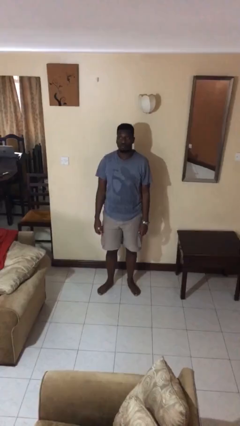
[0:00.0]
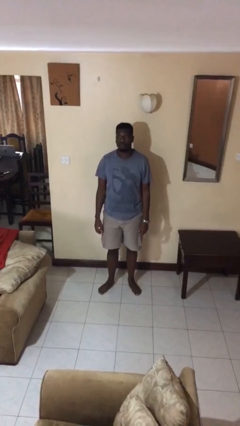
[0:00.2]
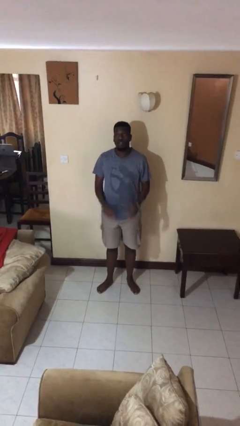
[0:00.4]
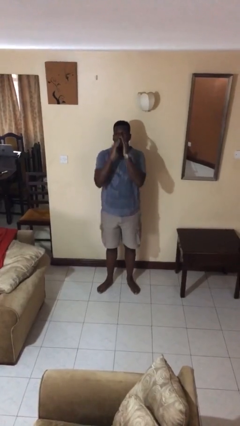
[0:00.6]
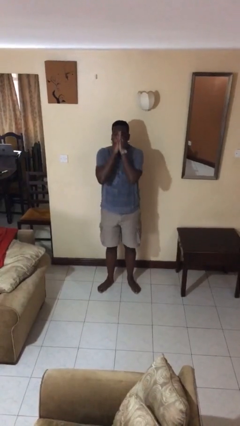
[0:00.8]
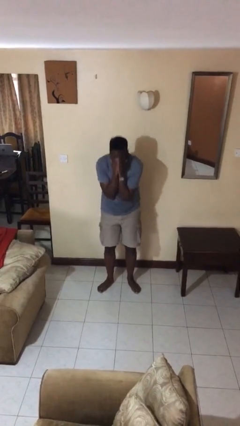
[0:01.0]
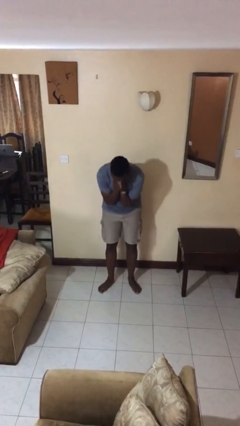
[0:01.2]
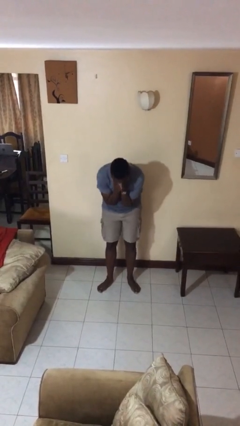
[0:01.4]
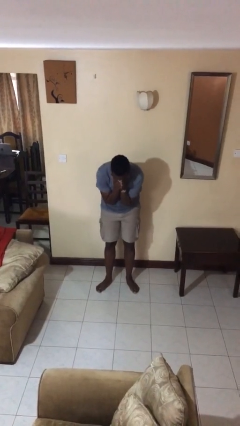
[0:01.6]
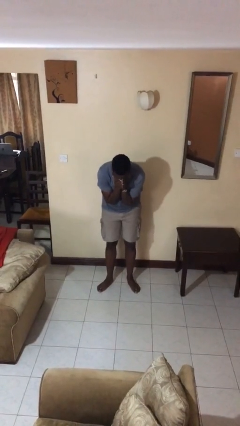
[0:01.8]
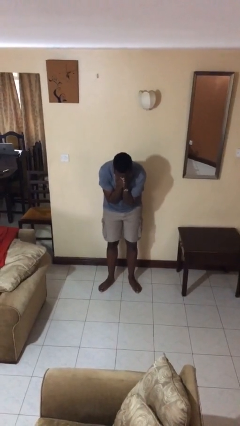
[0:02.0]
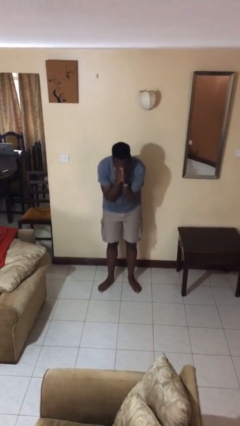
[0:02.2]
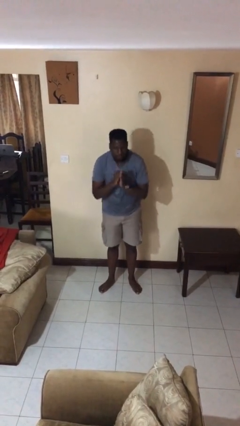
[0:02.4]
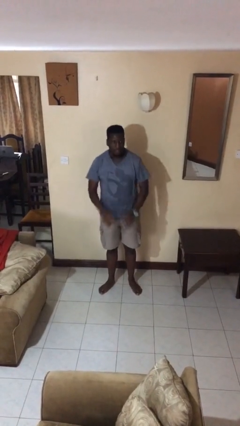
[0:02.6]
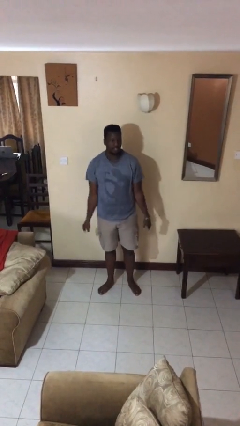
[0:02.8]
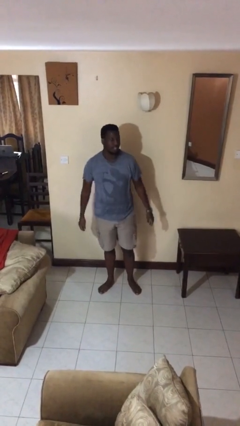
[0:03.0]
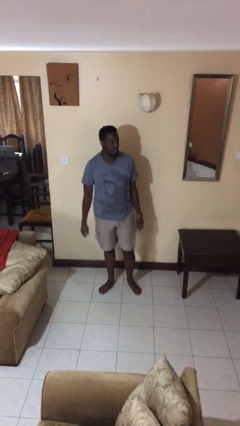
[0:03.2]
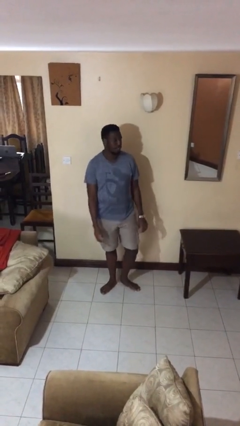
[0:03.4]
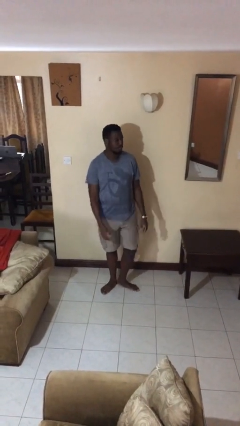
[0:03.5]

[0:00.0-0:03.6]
person sneezes into hand

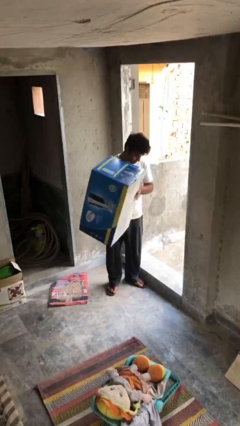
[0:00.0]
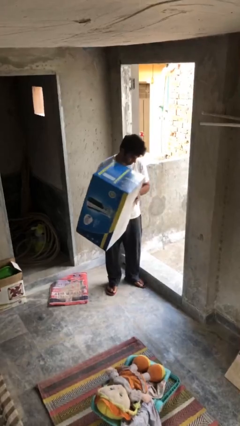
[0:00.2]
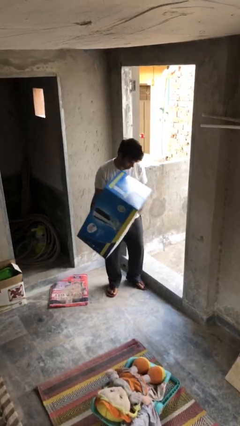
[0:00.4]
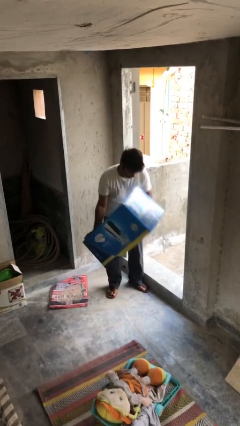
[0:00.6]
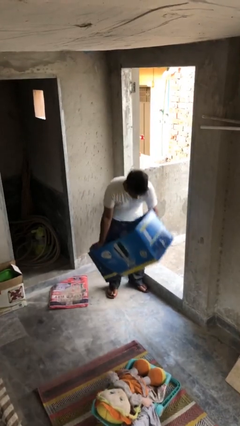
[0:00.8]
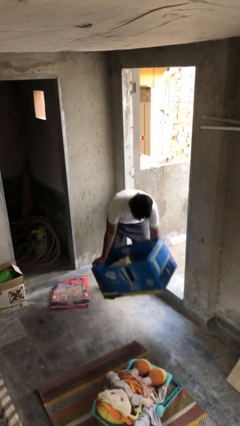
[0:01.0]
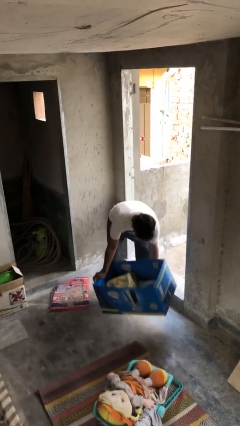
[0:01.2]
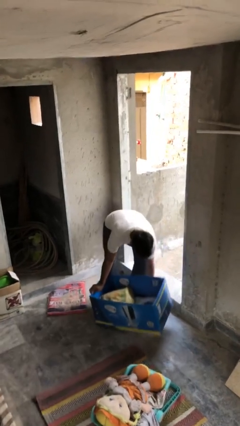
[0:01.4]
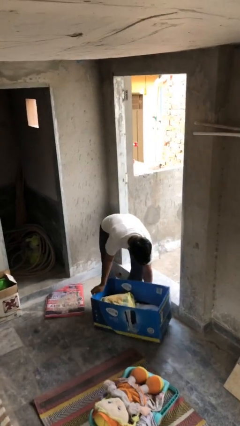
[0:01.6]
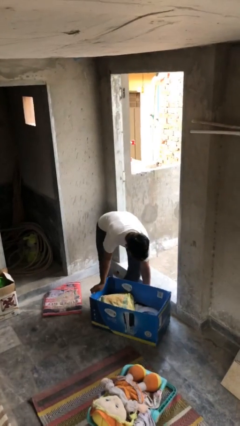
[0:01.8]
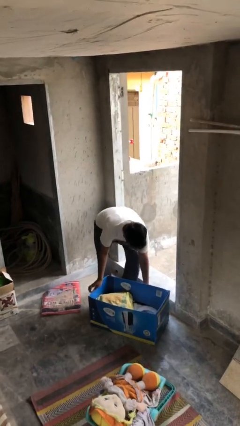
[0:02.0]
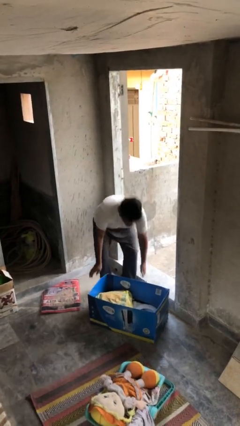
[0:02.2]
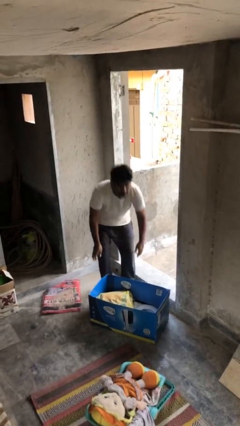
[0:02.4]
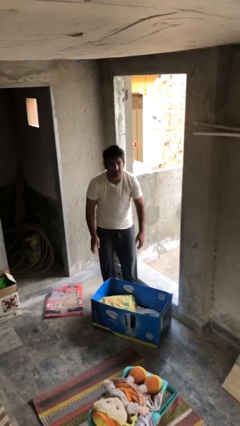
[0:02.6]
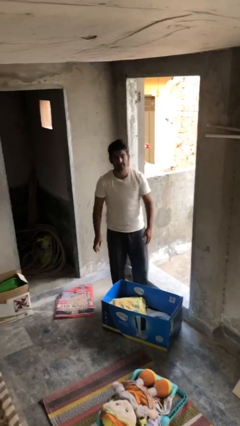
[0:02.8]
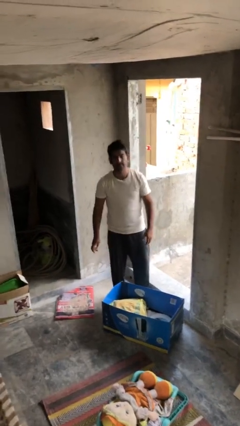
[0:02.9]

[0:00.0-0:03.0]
person puts down object on floor

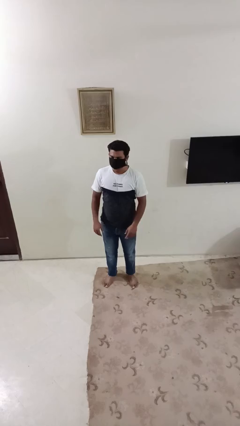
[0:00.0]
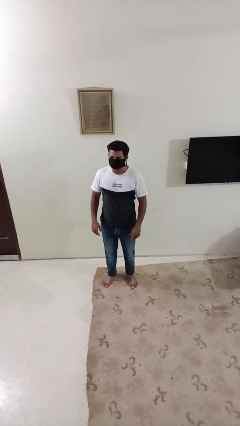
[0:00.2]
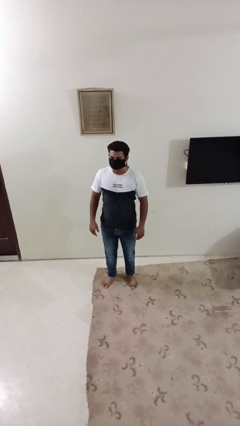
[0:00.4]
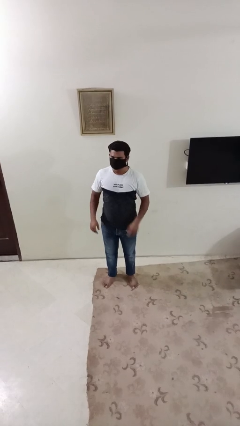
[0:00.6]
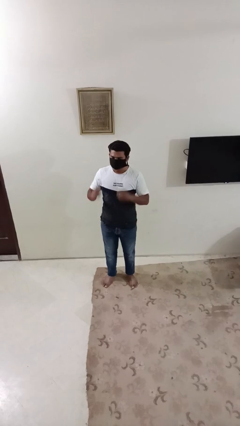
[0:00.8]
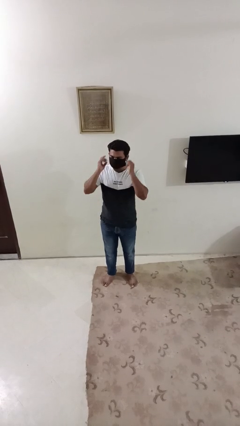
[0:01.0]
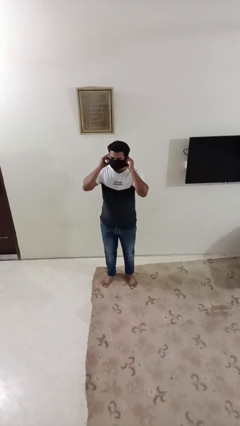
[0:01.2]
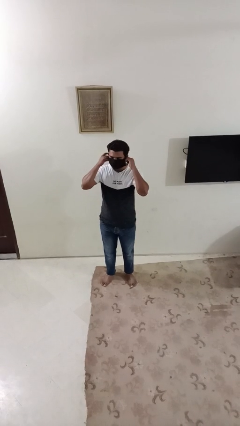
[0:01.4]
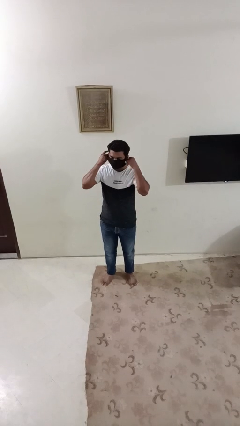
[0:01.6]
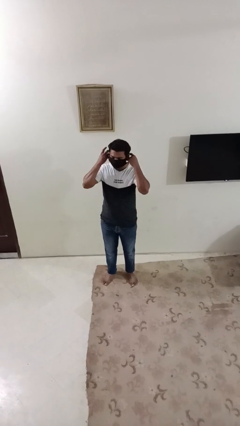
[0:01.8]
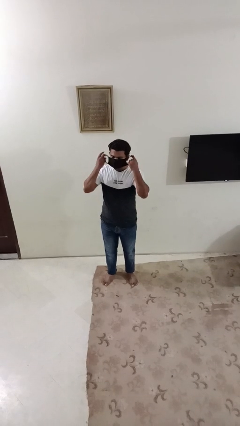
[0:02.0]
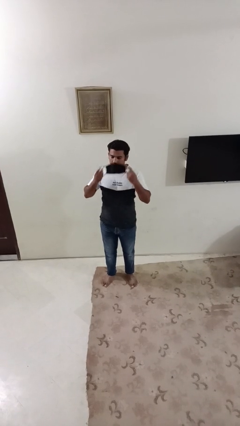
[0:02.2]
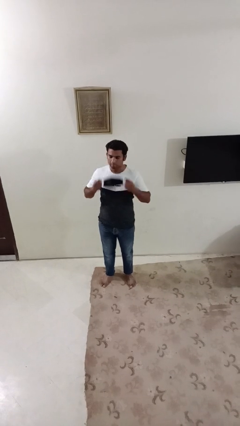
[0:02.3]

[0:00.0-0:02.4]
person takes off facemask

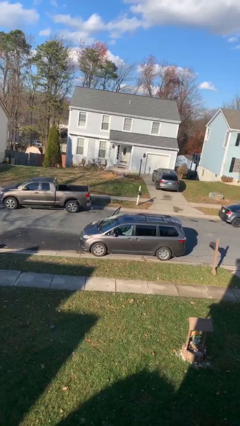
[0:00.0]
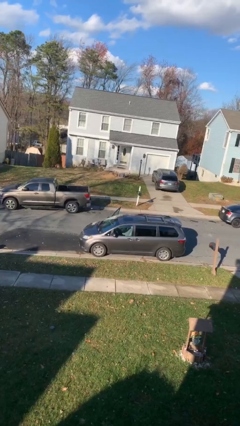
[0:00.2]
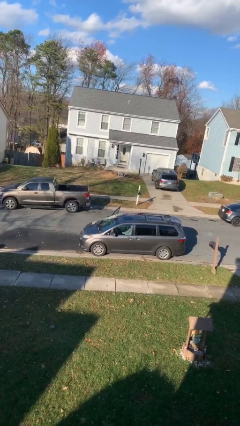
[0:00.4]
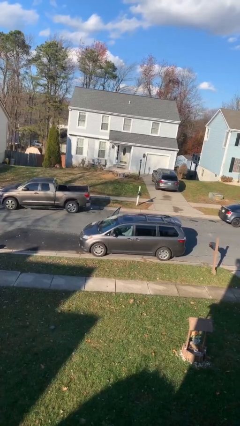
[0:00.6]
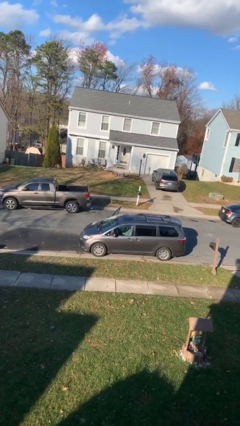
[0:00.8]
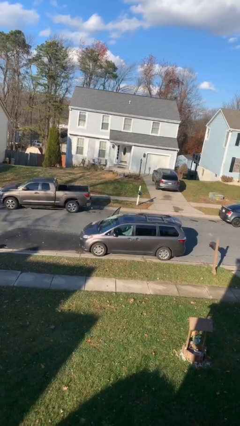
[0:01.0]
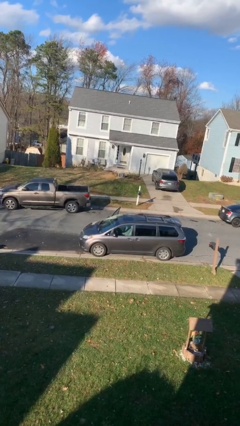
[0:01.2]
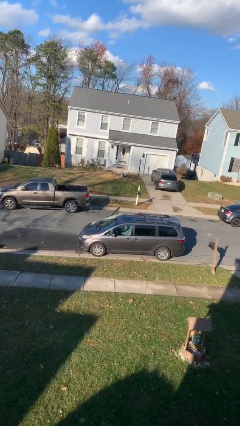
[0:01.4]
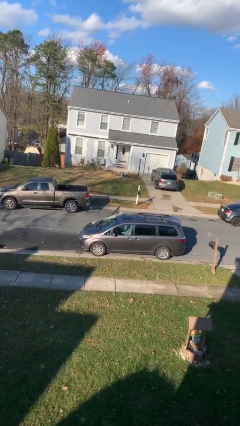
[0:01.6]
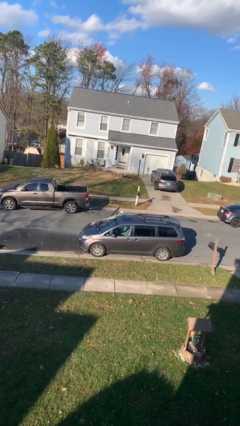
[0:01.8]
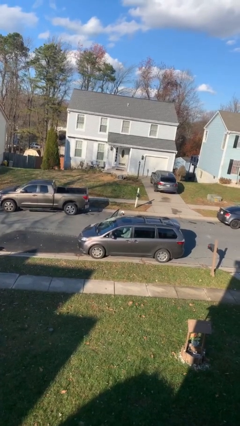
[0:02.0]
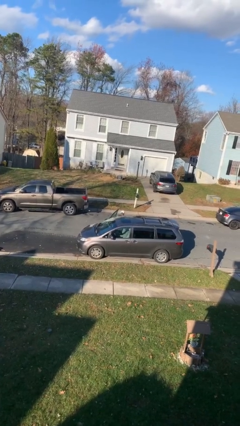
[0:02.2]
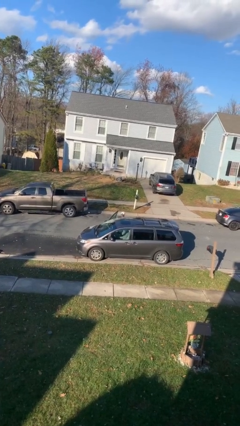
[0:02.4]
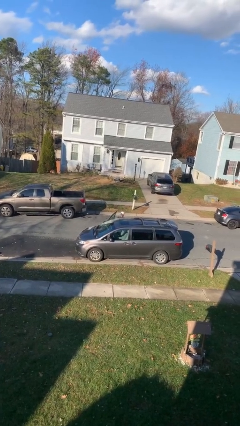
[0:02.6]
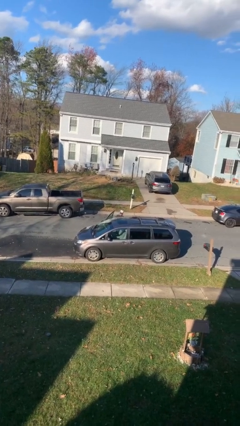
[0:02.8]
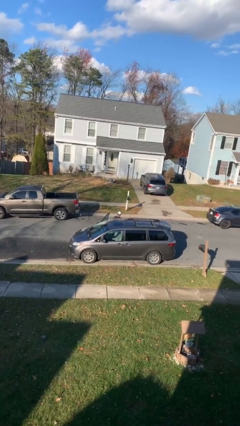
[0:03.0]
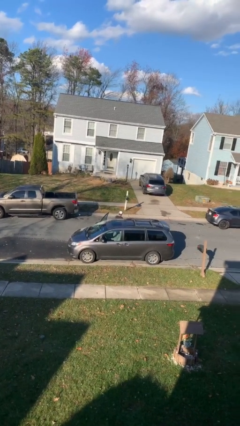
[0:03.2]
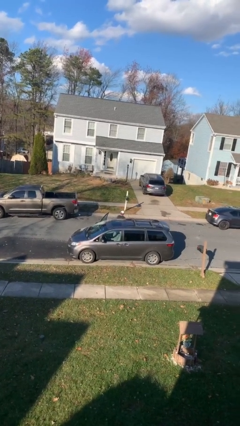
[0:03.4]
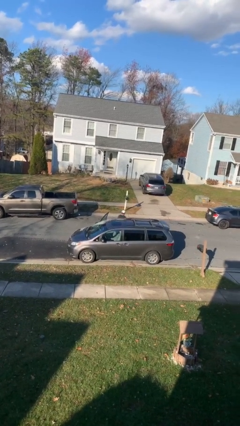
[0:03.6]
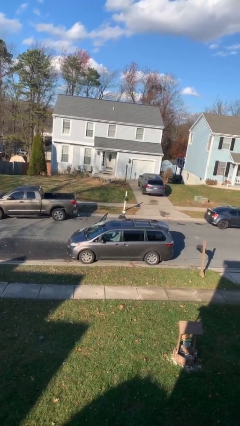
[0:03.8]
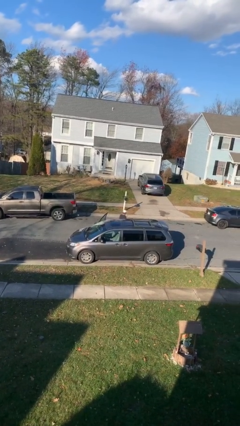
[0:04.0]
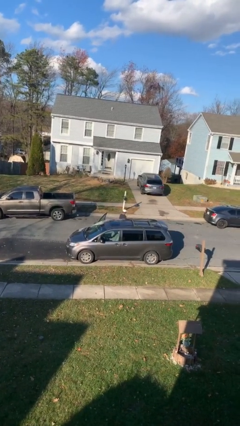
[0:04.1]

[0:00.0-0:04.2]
person exits car

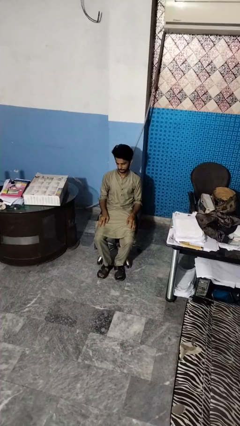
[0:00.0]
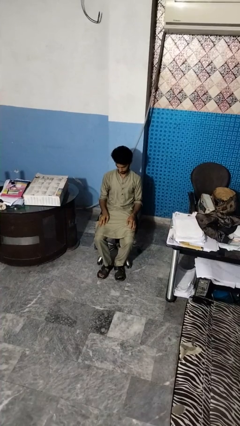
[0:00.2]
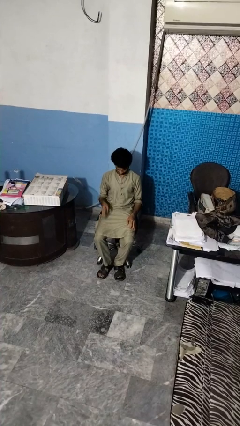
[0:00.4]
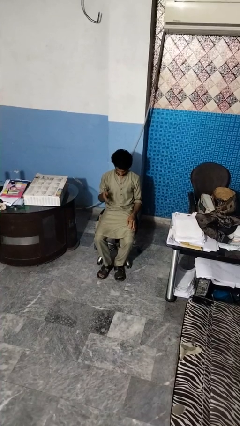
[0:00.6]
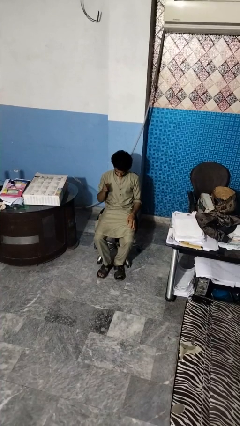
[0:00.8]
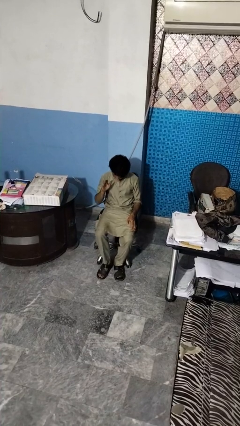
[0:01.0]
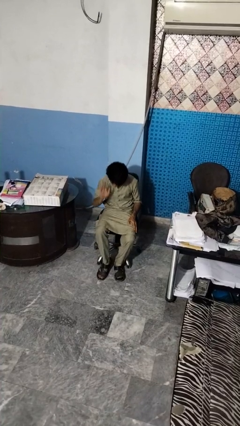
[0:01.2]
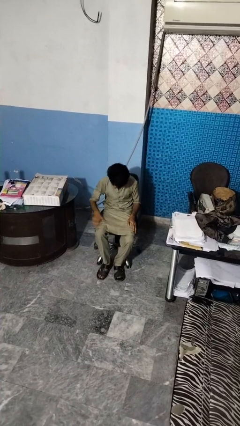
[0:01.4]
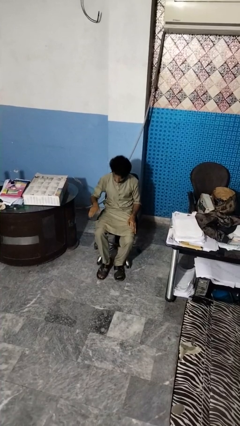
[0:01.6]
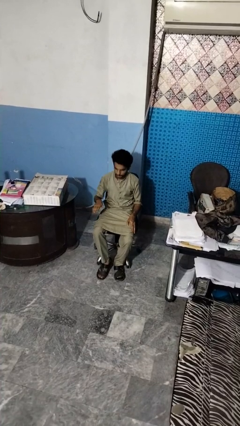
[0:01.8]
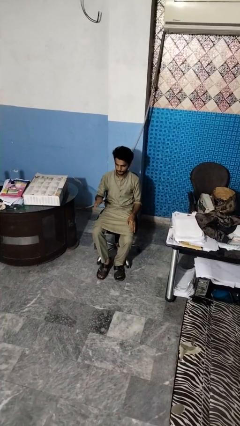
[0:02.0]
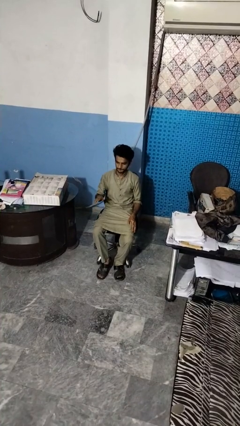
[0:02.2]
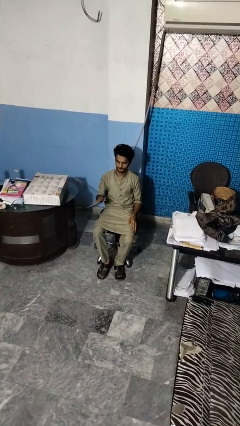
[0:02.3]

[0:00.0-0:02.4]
person swats bug

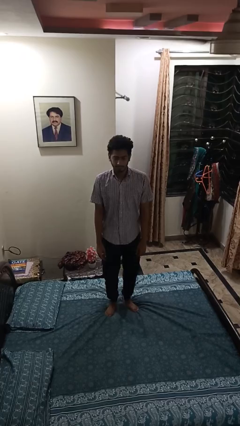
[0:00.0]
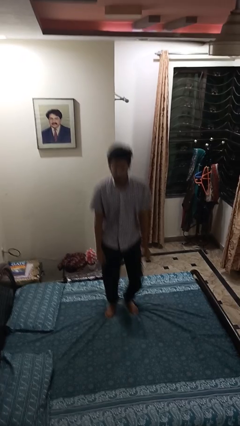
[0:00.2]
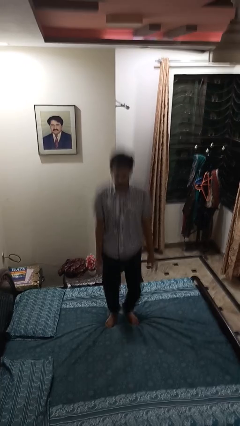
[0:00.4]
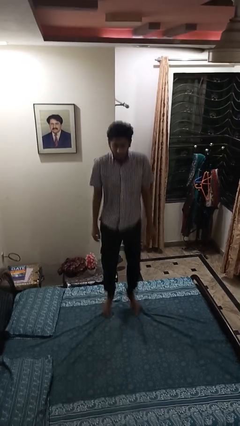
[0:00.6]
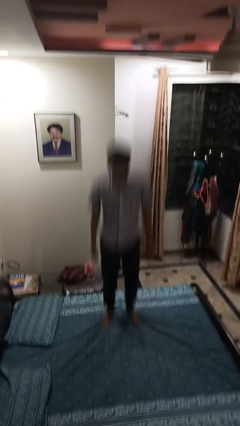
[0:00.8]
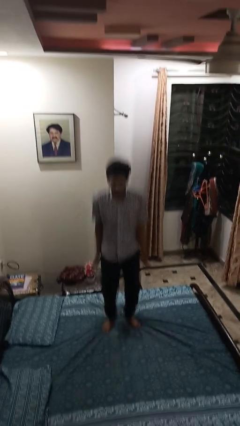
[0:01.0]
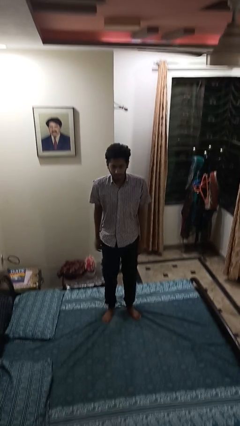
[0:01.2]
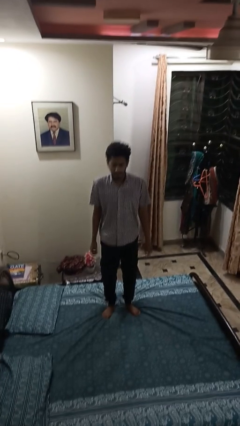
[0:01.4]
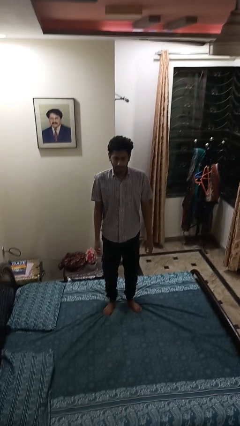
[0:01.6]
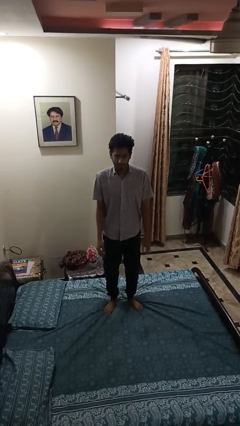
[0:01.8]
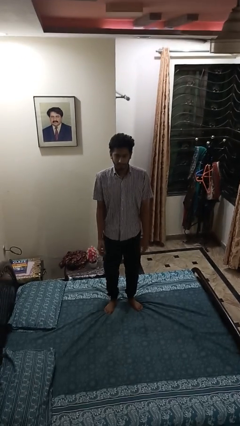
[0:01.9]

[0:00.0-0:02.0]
person jumps on bed
